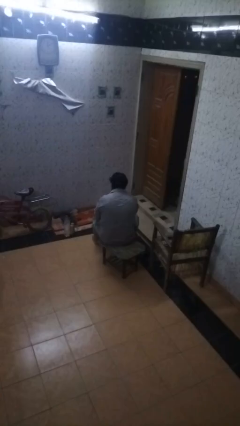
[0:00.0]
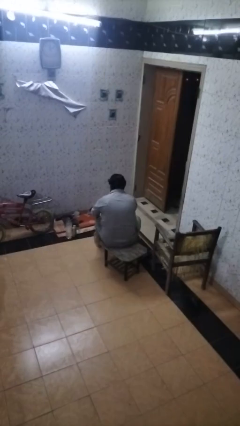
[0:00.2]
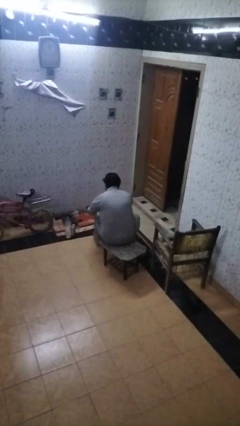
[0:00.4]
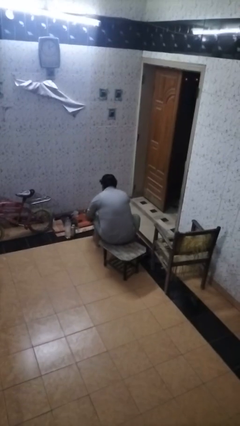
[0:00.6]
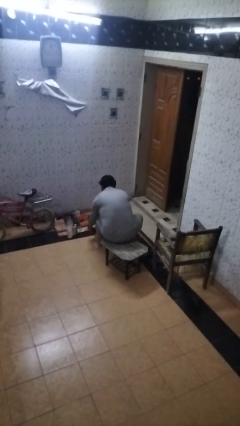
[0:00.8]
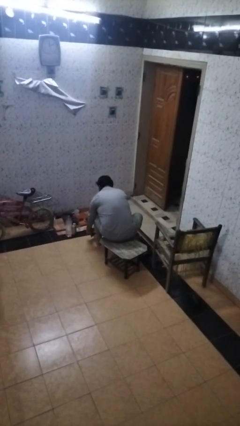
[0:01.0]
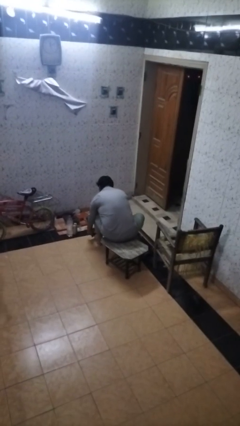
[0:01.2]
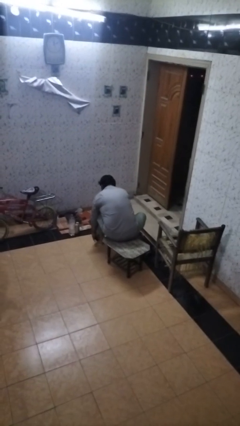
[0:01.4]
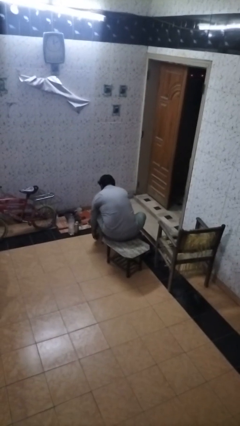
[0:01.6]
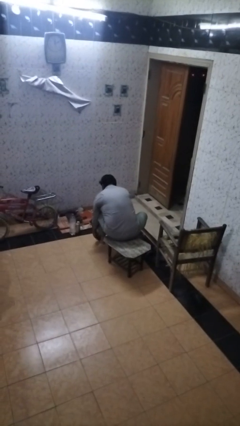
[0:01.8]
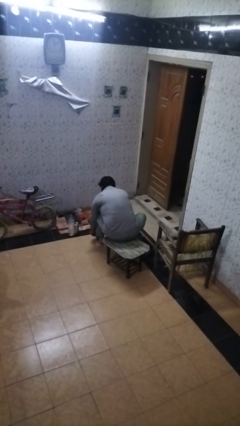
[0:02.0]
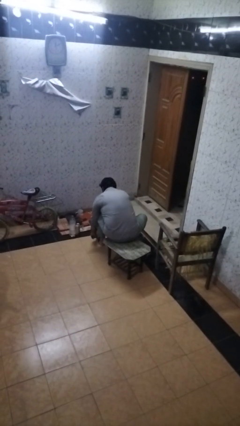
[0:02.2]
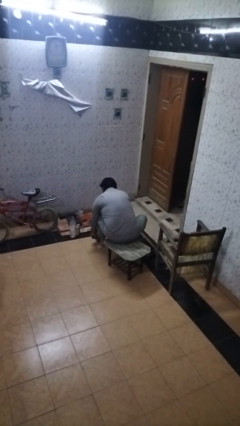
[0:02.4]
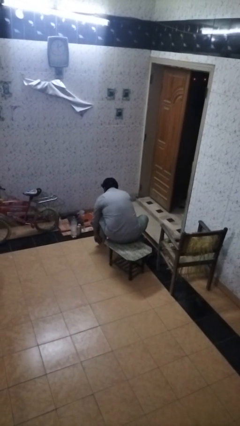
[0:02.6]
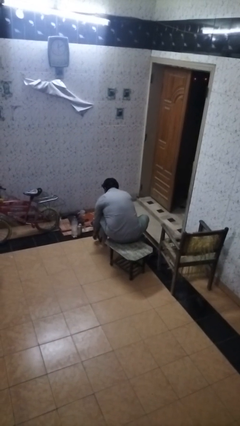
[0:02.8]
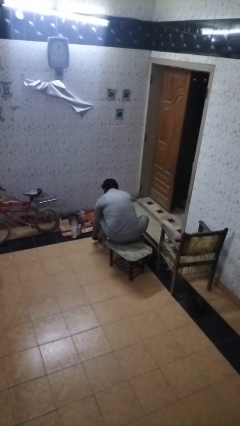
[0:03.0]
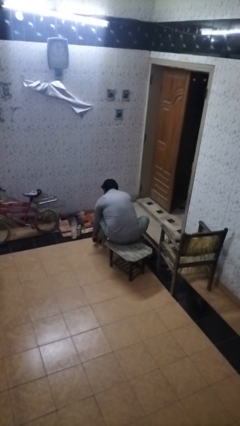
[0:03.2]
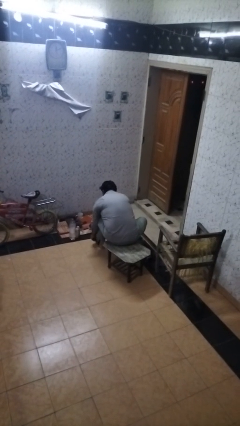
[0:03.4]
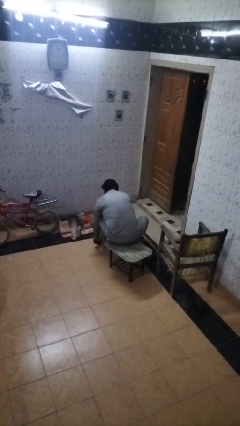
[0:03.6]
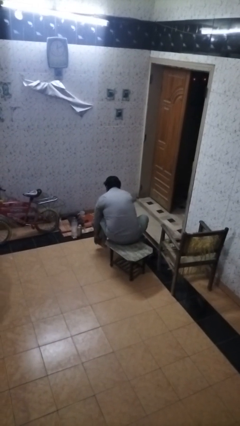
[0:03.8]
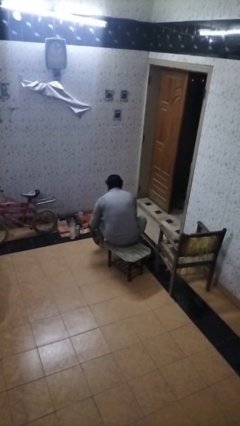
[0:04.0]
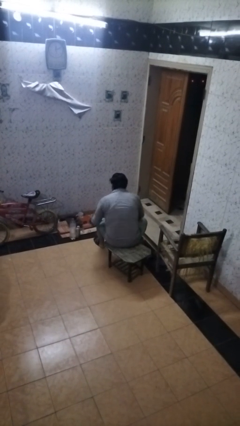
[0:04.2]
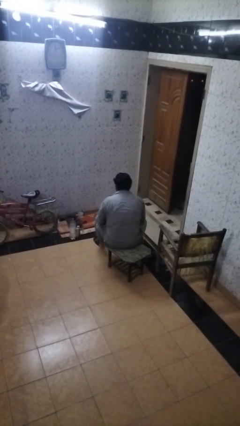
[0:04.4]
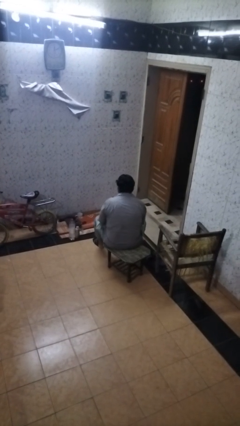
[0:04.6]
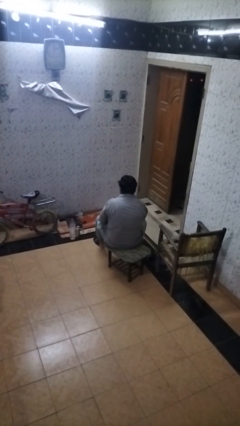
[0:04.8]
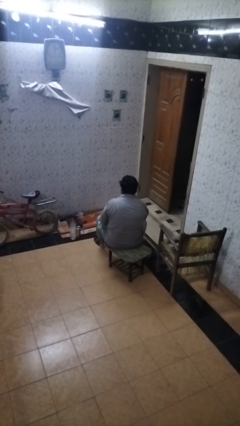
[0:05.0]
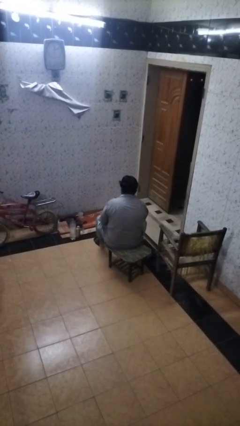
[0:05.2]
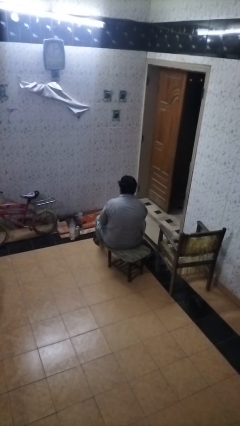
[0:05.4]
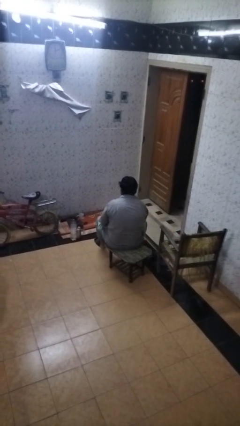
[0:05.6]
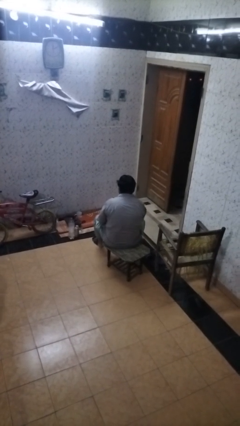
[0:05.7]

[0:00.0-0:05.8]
person puts on socks

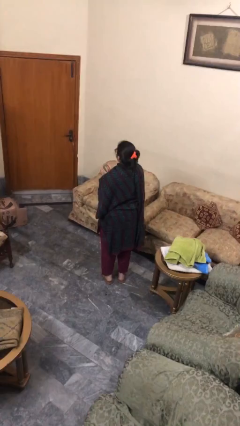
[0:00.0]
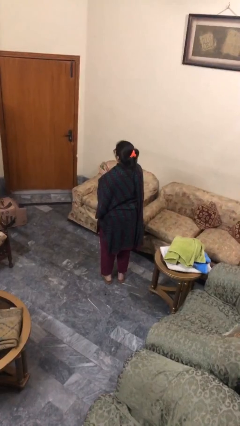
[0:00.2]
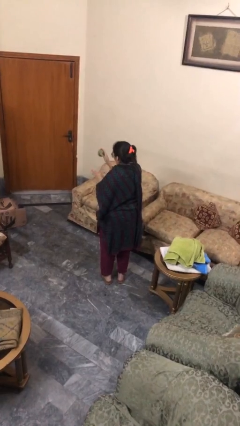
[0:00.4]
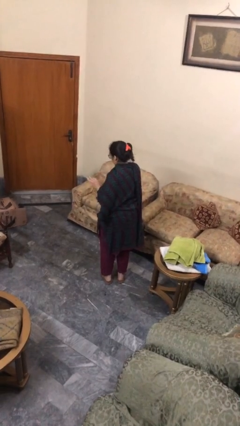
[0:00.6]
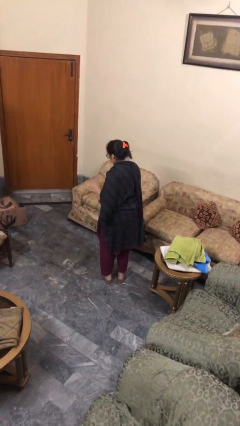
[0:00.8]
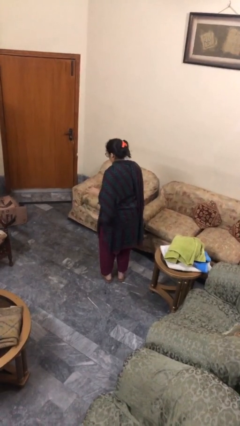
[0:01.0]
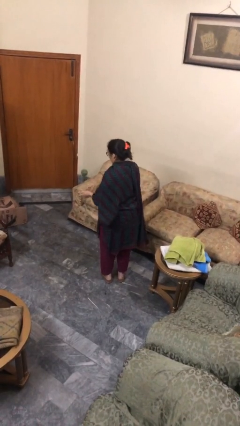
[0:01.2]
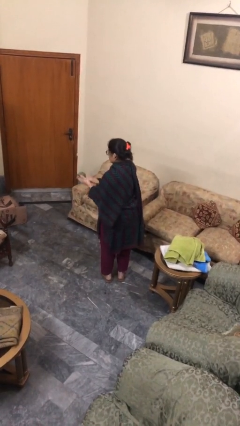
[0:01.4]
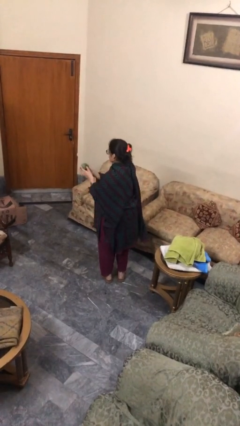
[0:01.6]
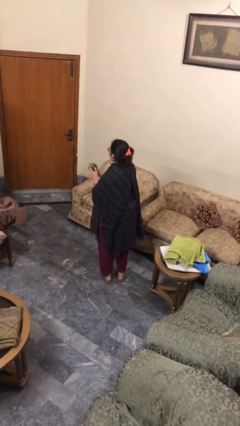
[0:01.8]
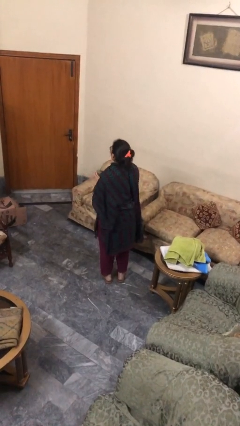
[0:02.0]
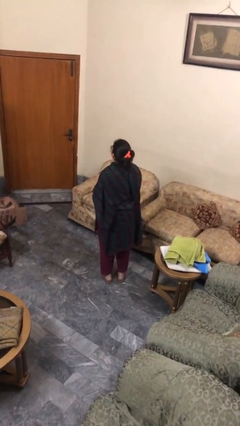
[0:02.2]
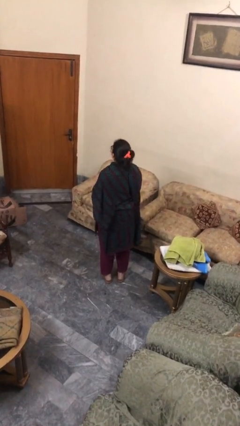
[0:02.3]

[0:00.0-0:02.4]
person bounces ball on floor

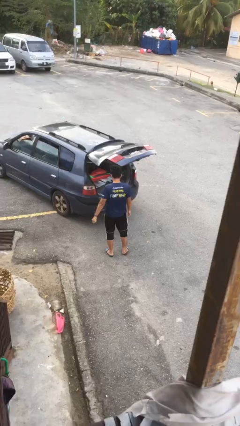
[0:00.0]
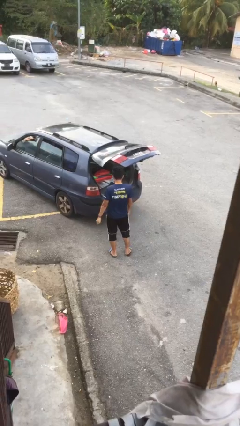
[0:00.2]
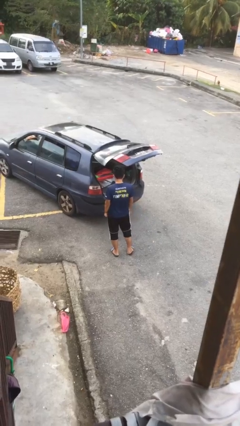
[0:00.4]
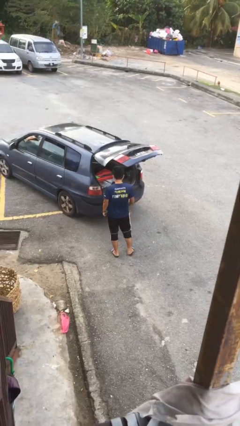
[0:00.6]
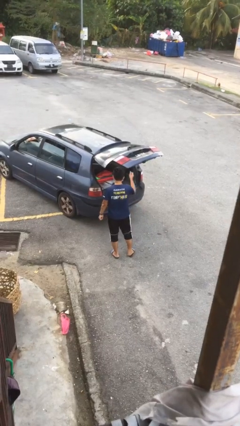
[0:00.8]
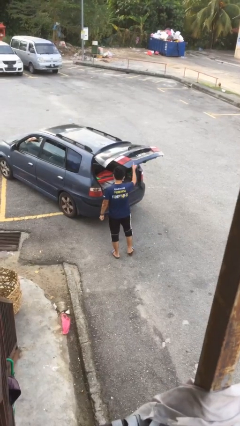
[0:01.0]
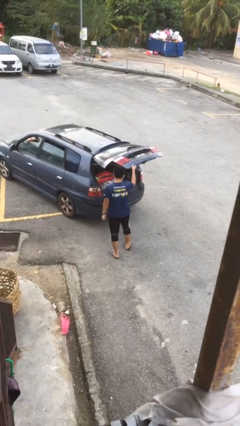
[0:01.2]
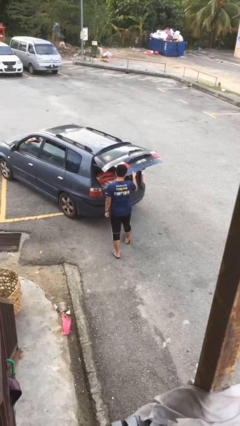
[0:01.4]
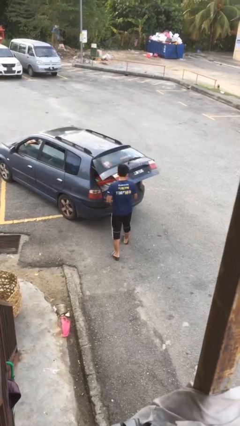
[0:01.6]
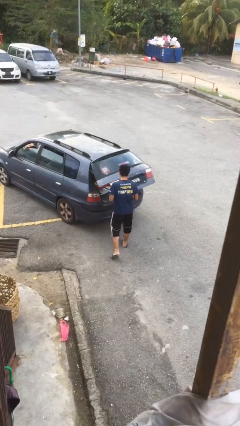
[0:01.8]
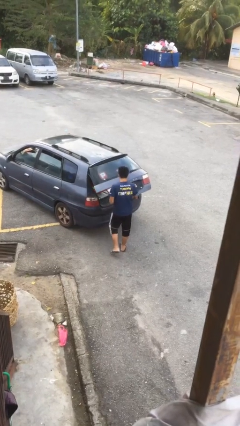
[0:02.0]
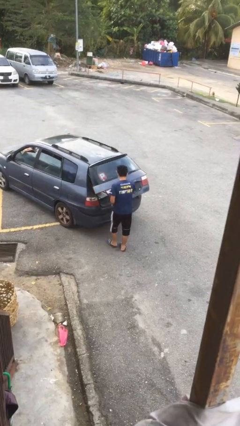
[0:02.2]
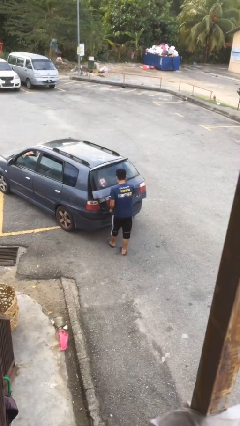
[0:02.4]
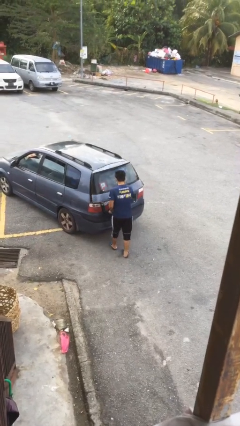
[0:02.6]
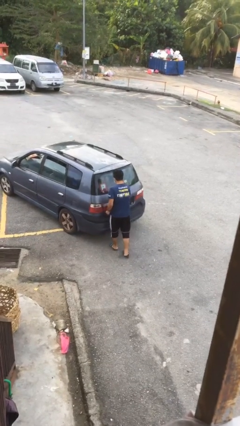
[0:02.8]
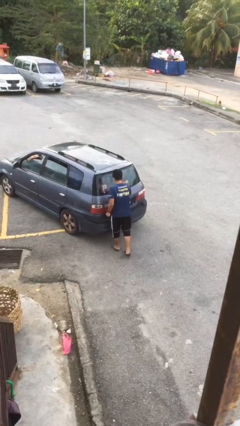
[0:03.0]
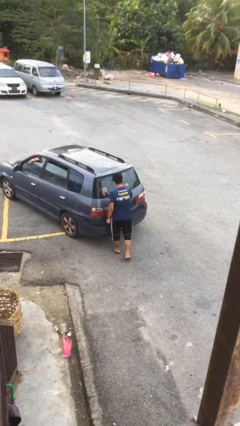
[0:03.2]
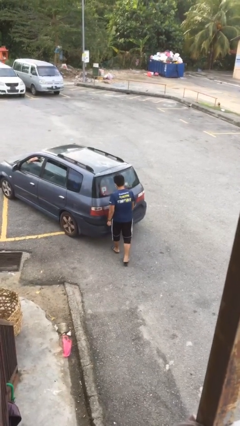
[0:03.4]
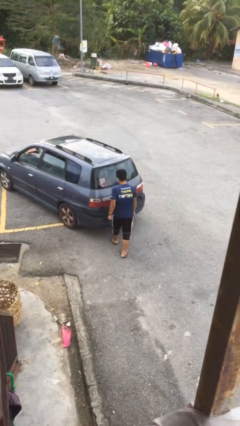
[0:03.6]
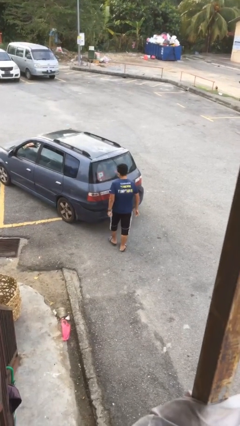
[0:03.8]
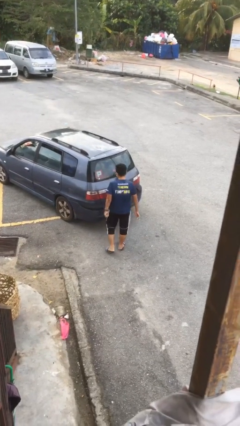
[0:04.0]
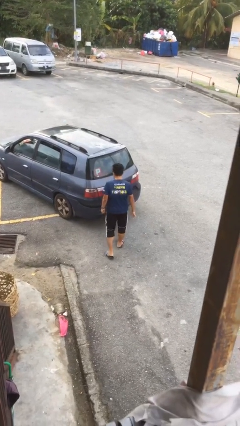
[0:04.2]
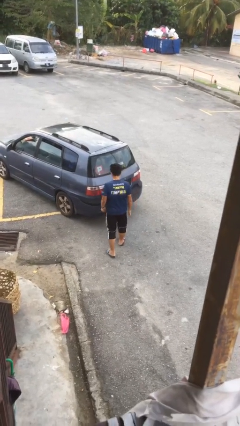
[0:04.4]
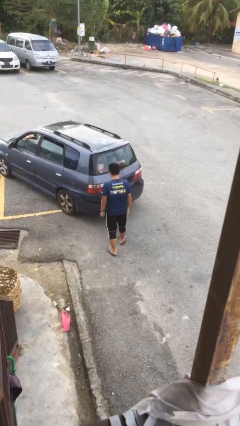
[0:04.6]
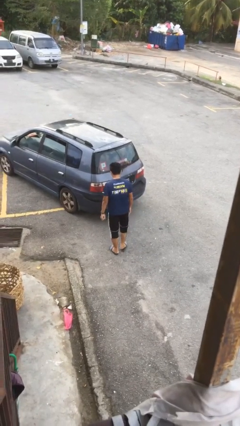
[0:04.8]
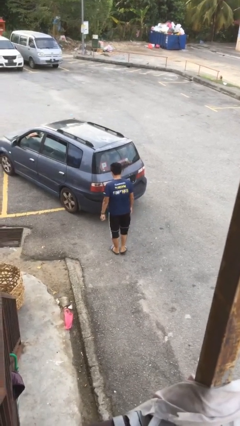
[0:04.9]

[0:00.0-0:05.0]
person closes car trunk

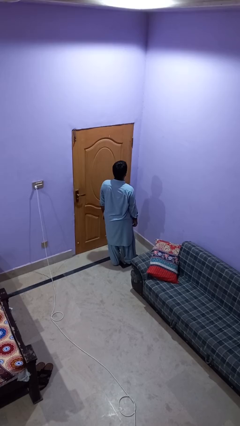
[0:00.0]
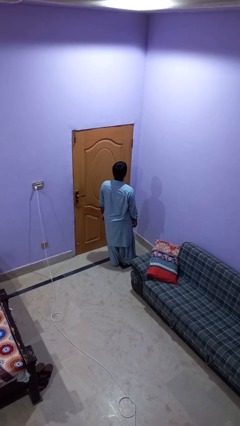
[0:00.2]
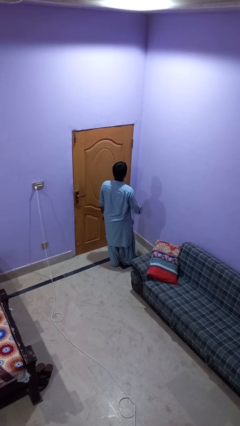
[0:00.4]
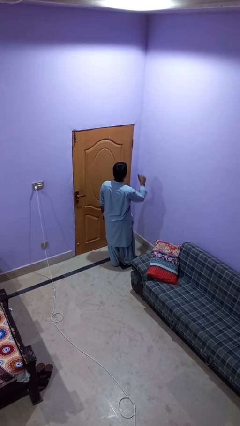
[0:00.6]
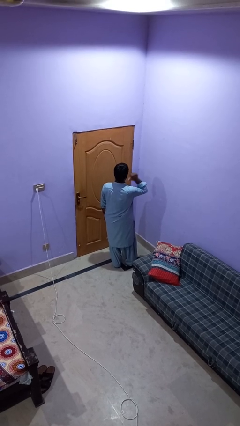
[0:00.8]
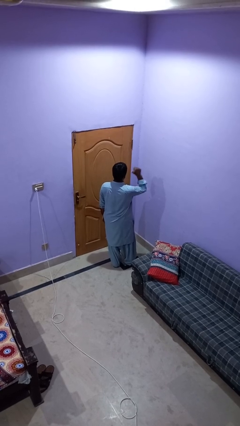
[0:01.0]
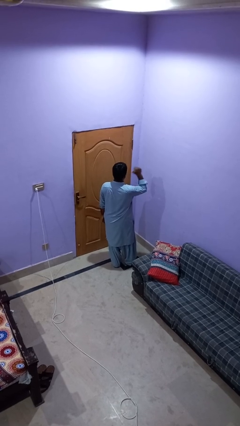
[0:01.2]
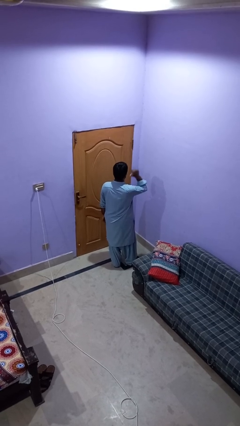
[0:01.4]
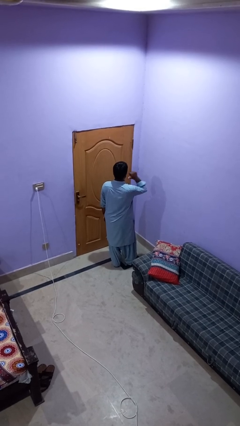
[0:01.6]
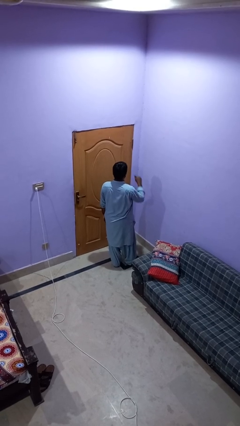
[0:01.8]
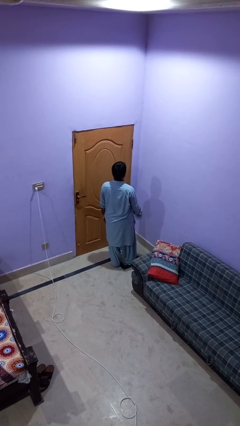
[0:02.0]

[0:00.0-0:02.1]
person gestures behind me

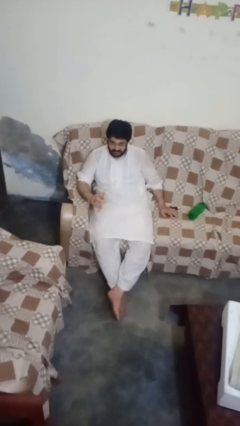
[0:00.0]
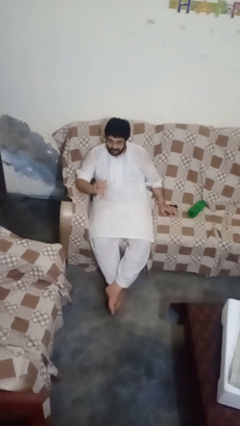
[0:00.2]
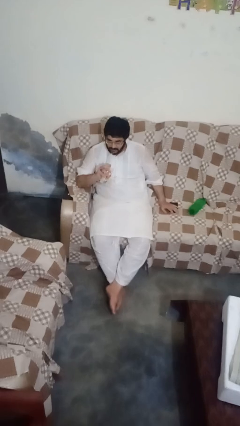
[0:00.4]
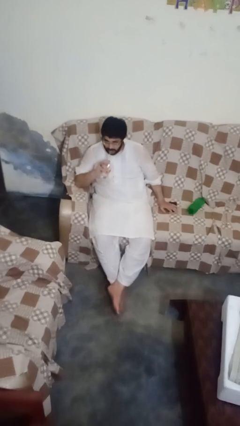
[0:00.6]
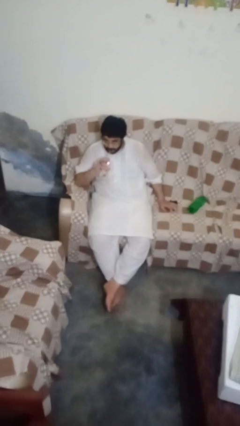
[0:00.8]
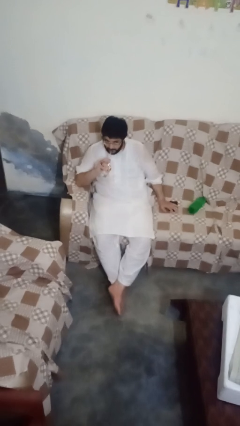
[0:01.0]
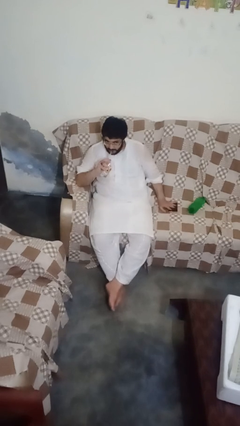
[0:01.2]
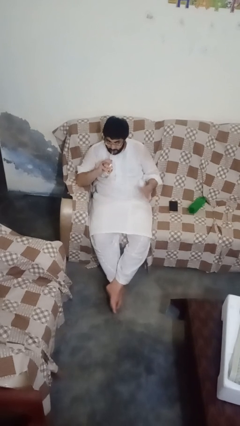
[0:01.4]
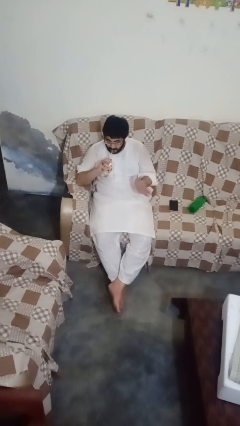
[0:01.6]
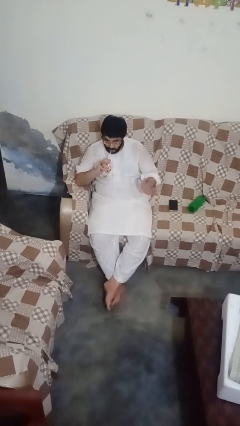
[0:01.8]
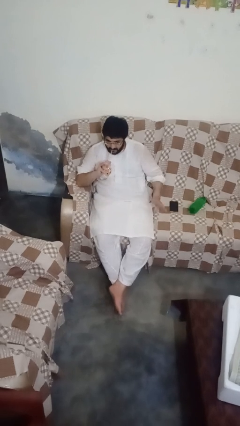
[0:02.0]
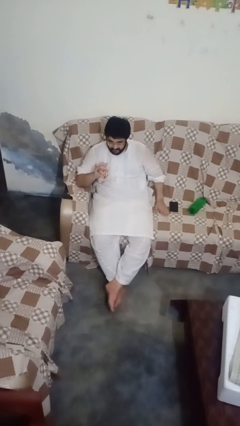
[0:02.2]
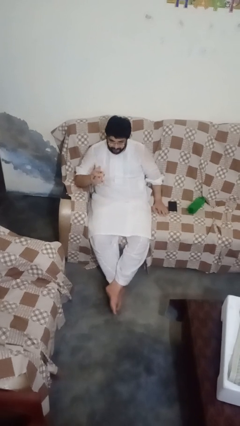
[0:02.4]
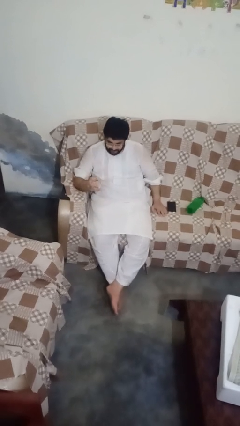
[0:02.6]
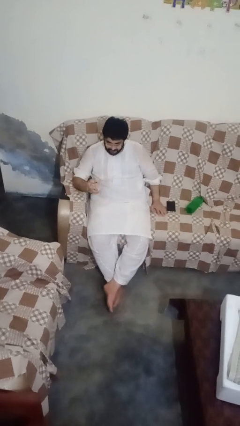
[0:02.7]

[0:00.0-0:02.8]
person drinks from straw
